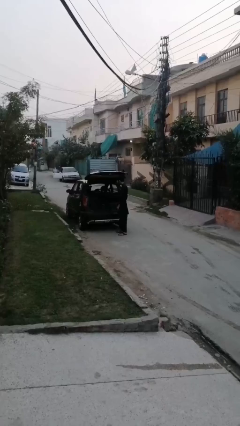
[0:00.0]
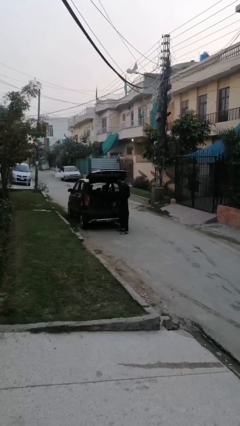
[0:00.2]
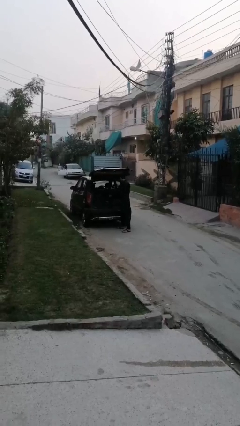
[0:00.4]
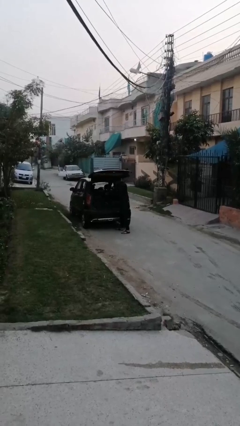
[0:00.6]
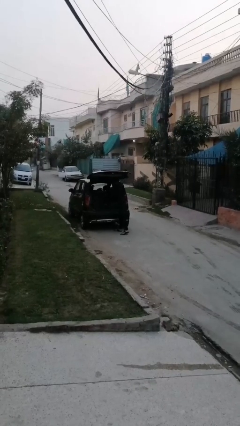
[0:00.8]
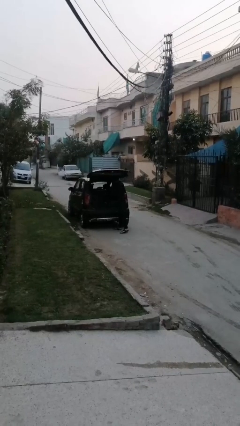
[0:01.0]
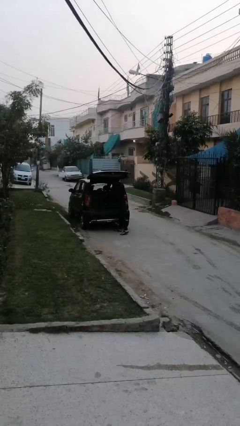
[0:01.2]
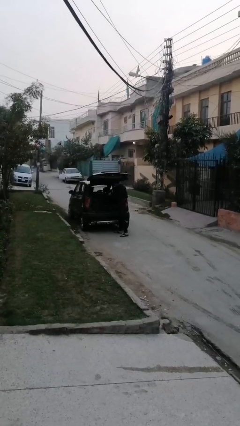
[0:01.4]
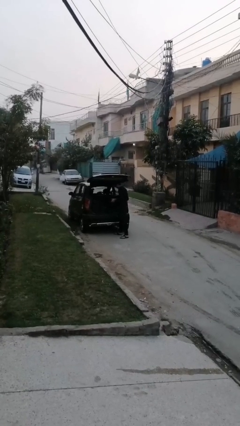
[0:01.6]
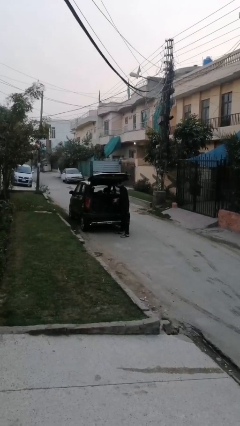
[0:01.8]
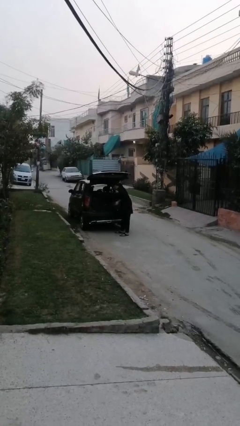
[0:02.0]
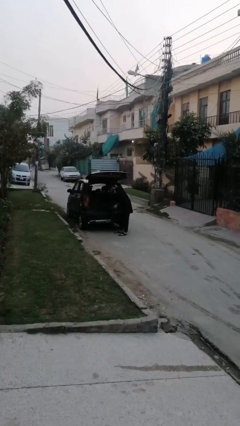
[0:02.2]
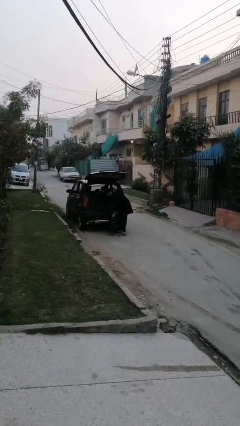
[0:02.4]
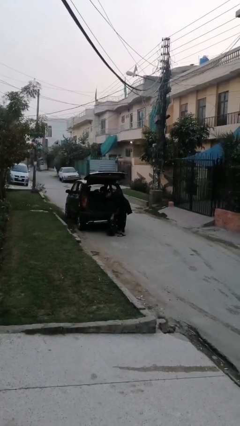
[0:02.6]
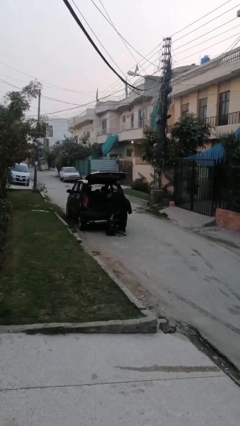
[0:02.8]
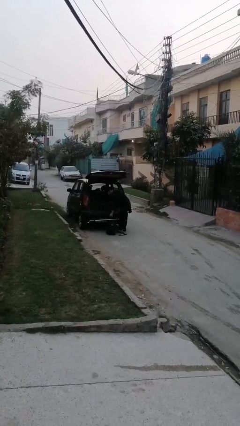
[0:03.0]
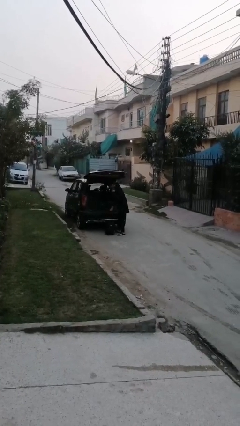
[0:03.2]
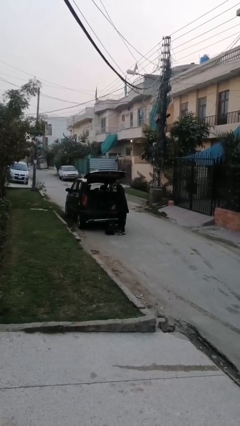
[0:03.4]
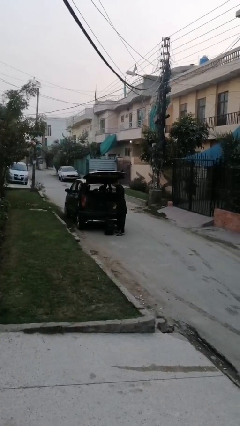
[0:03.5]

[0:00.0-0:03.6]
person loads car

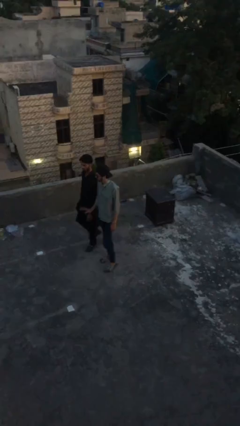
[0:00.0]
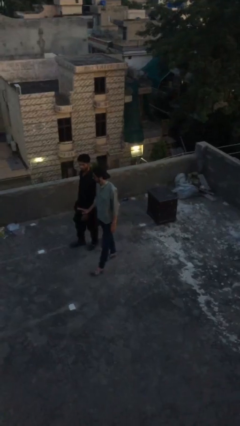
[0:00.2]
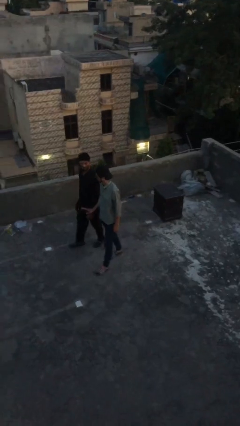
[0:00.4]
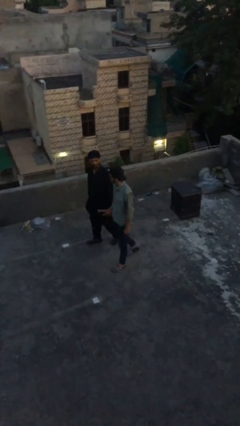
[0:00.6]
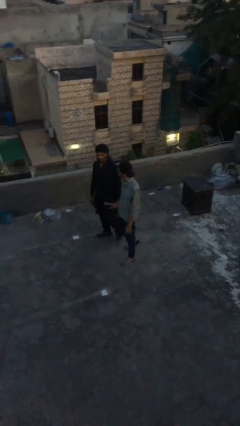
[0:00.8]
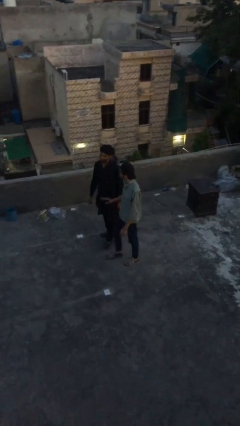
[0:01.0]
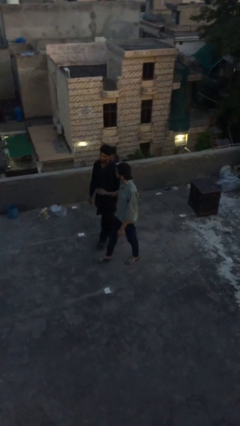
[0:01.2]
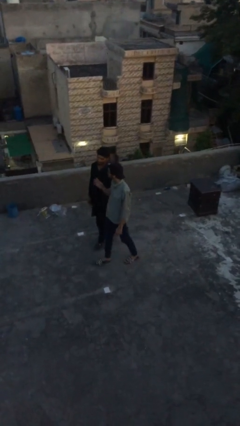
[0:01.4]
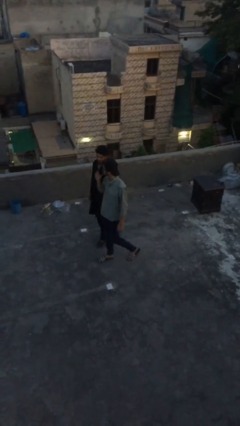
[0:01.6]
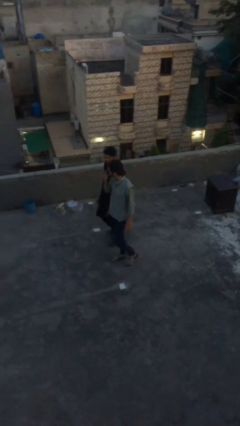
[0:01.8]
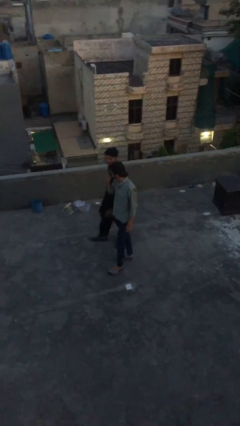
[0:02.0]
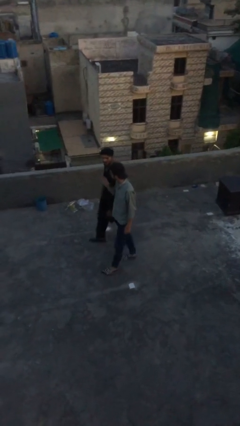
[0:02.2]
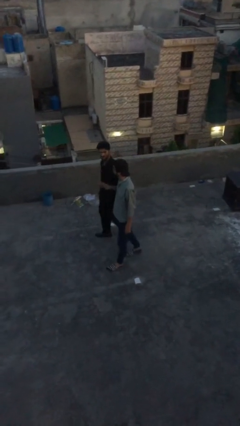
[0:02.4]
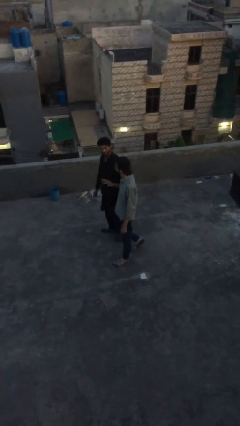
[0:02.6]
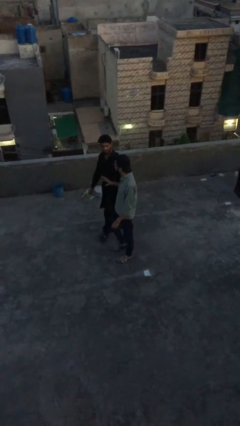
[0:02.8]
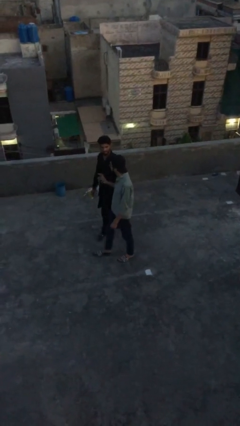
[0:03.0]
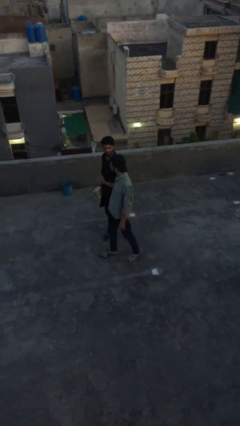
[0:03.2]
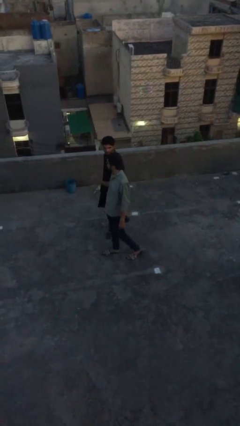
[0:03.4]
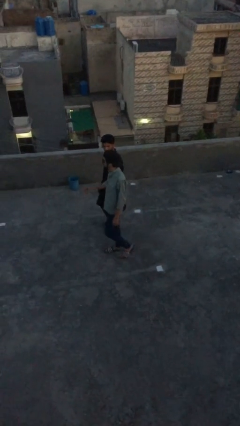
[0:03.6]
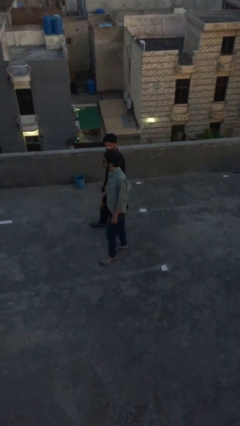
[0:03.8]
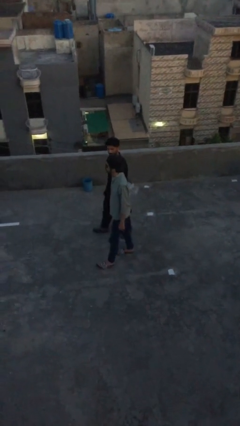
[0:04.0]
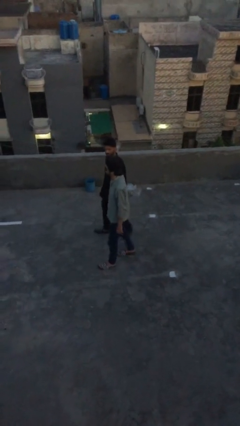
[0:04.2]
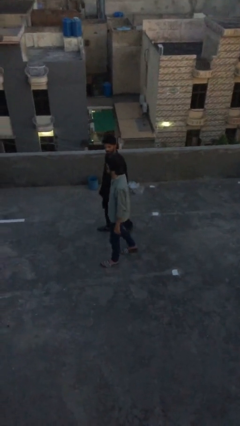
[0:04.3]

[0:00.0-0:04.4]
person talks to person

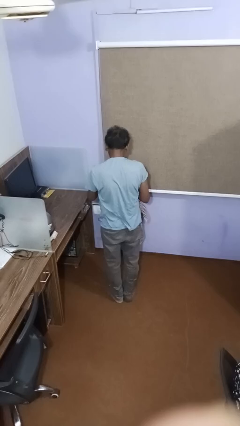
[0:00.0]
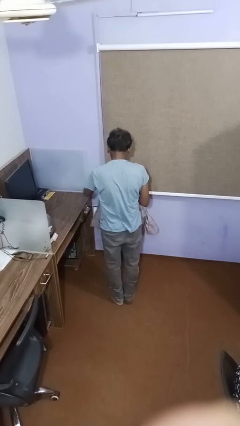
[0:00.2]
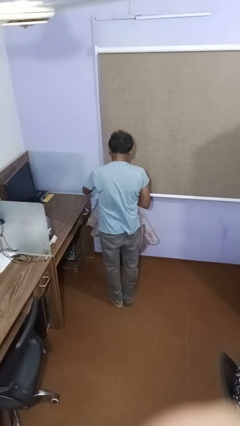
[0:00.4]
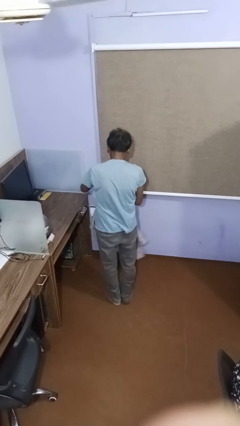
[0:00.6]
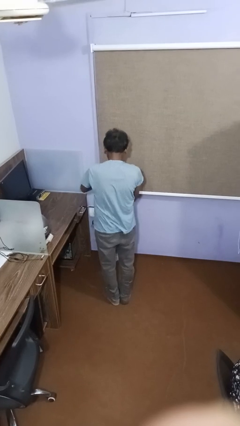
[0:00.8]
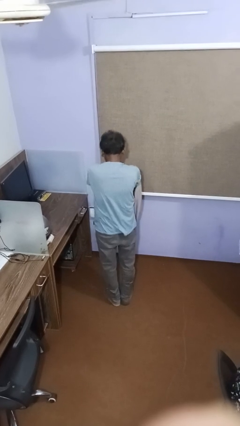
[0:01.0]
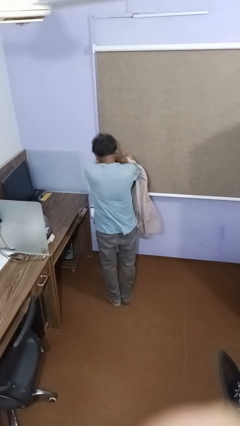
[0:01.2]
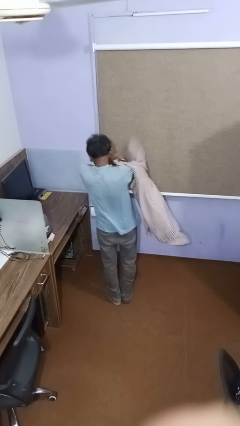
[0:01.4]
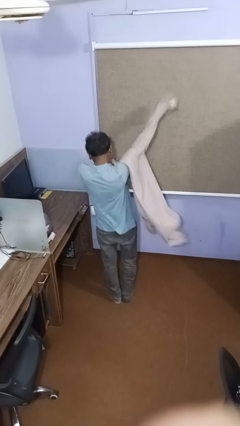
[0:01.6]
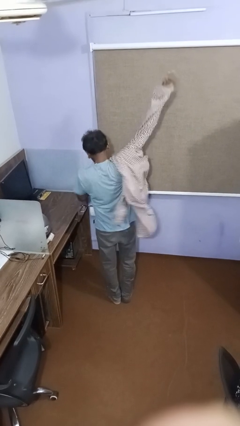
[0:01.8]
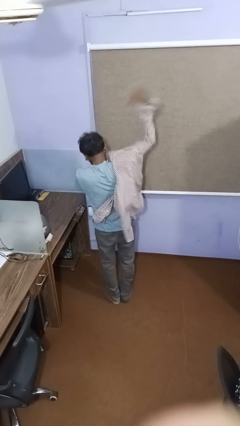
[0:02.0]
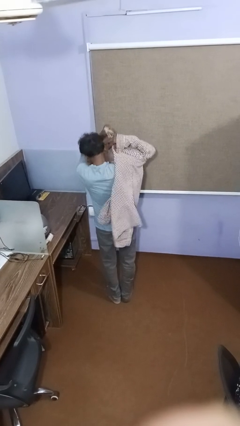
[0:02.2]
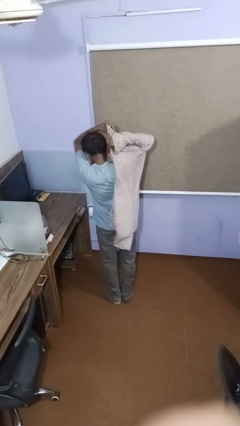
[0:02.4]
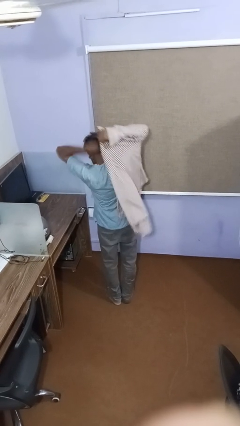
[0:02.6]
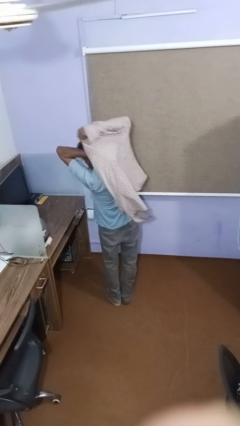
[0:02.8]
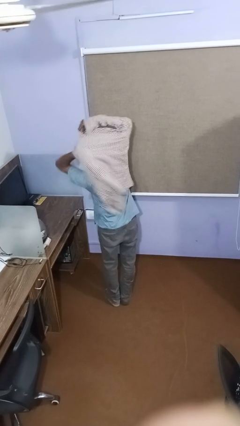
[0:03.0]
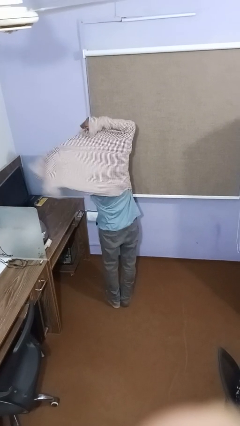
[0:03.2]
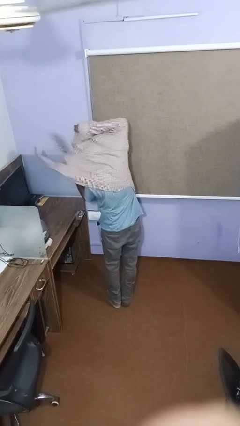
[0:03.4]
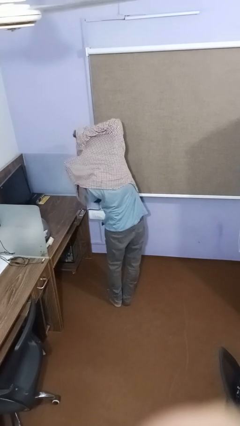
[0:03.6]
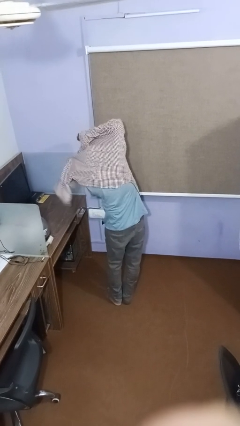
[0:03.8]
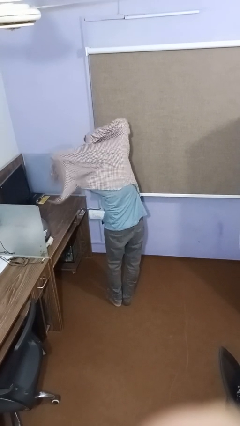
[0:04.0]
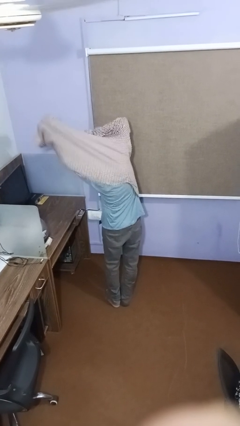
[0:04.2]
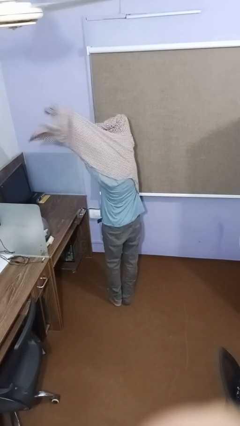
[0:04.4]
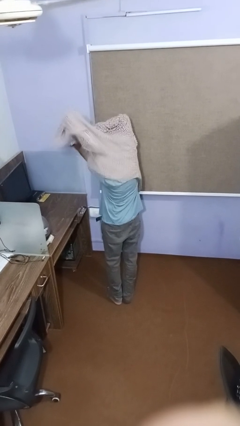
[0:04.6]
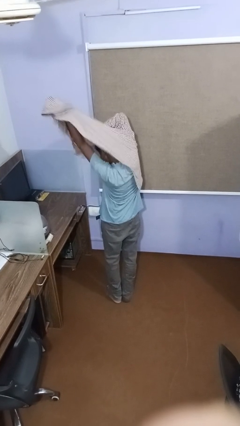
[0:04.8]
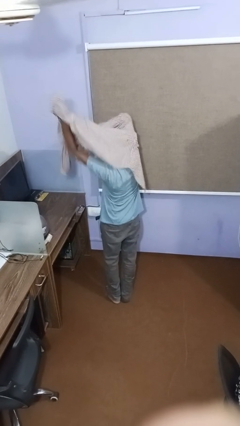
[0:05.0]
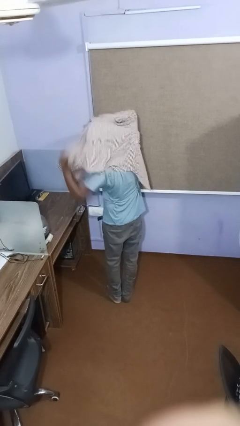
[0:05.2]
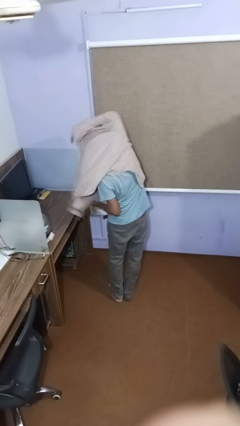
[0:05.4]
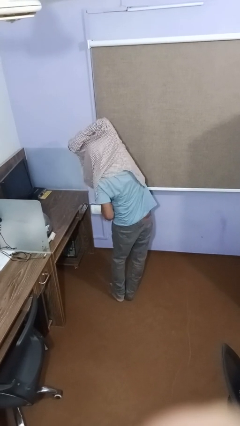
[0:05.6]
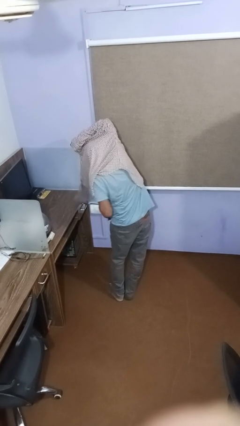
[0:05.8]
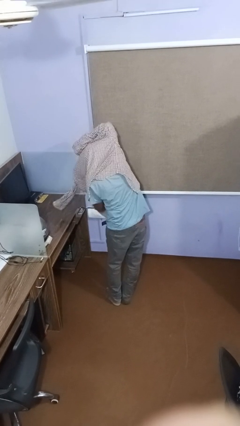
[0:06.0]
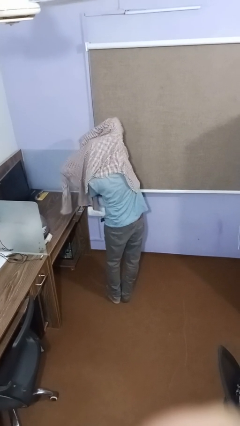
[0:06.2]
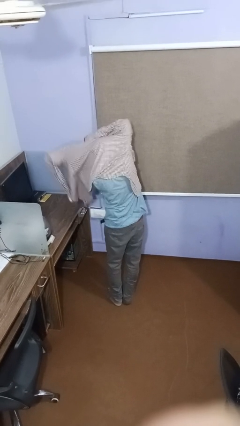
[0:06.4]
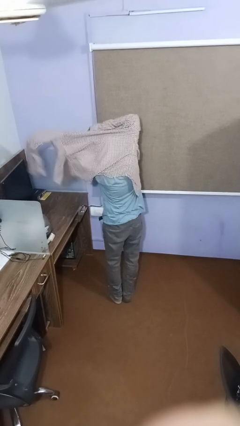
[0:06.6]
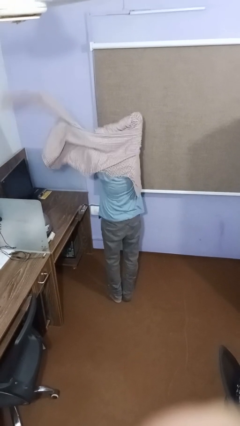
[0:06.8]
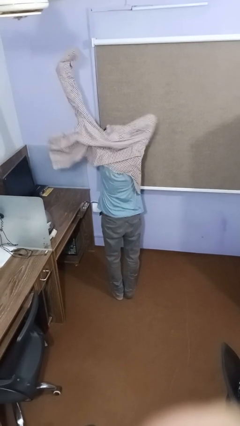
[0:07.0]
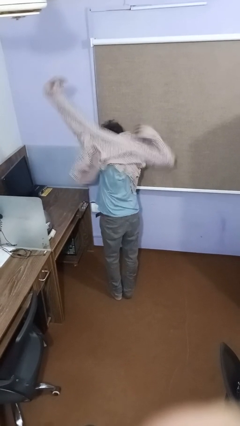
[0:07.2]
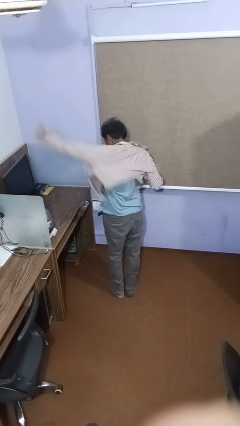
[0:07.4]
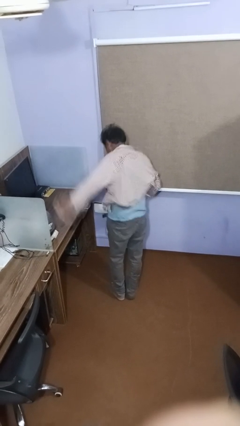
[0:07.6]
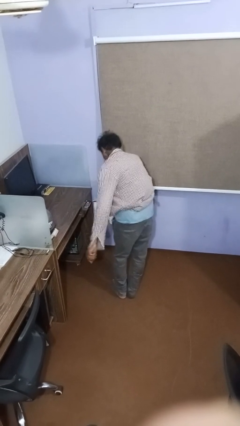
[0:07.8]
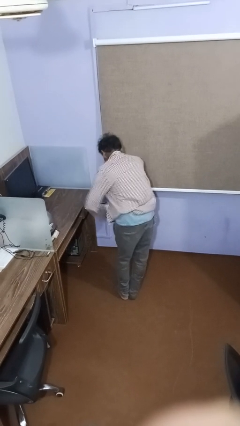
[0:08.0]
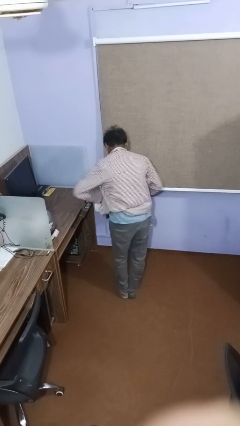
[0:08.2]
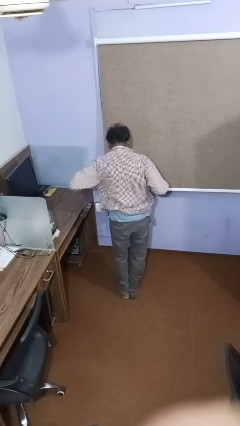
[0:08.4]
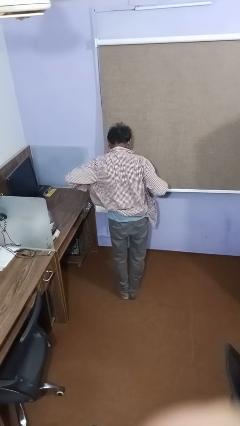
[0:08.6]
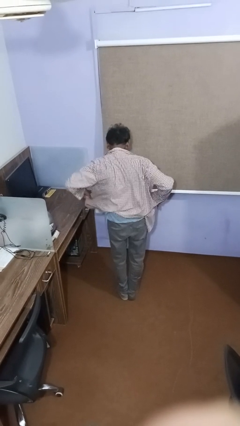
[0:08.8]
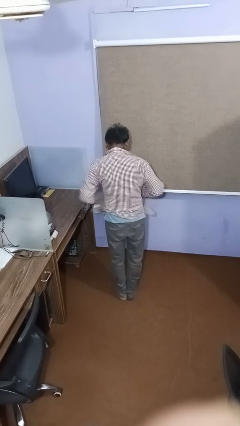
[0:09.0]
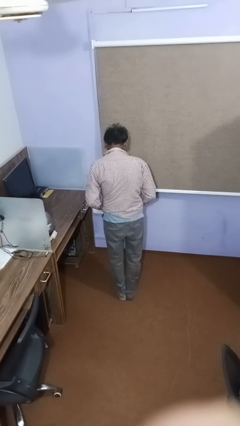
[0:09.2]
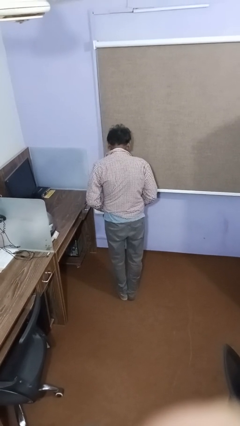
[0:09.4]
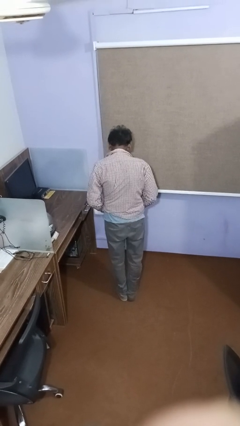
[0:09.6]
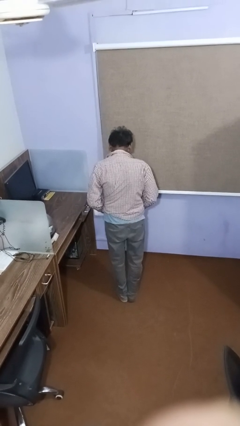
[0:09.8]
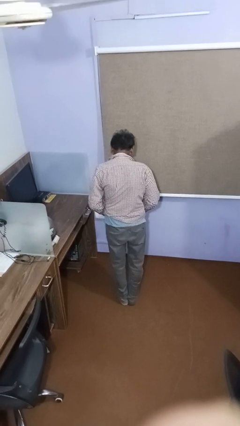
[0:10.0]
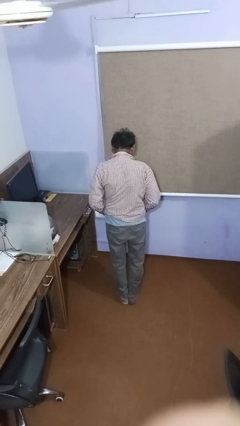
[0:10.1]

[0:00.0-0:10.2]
person puts on shirt
